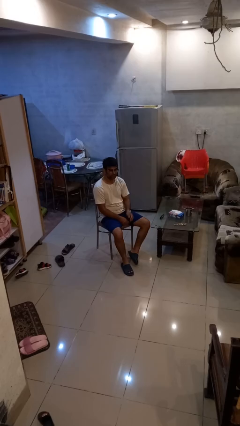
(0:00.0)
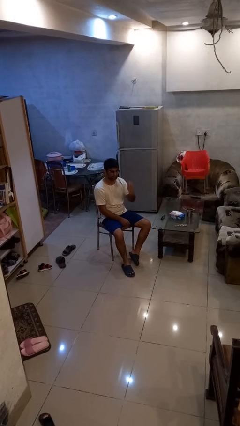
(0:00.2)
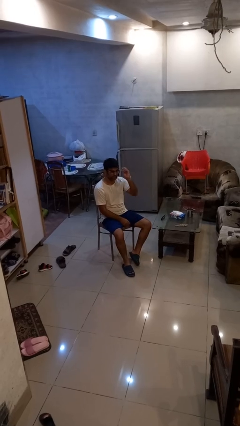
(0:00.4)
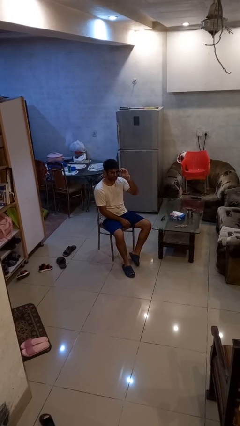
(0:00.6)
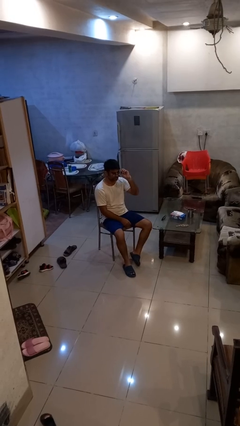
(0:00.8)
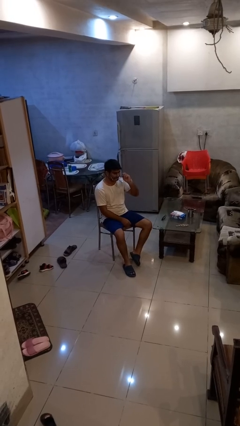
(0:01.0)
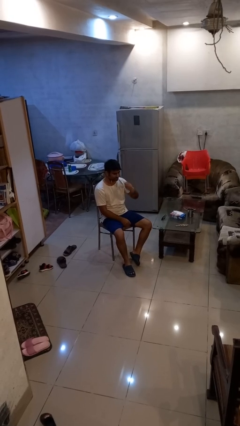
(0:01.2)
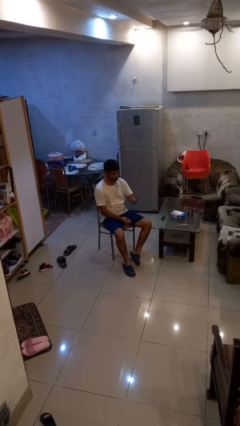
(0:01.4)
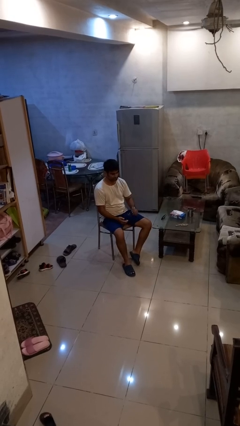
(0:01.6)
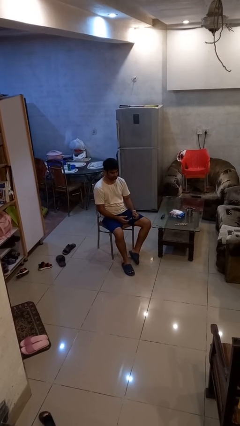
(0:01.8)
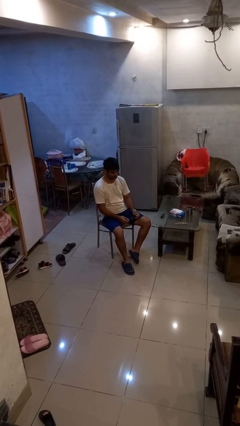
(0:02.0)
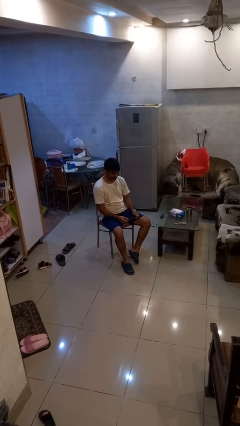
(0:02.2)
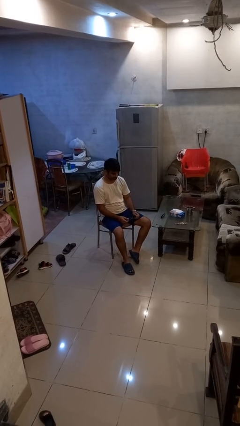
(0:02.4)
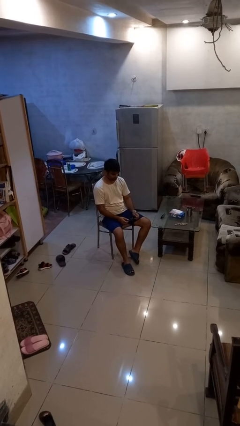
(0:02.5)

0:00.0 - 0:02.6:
person takes off glasses

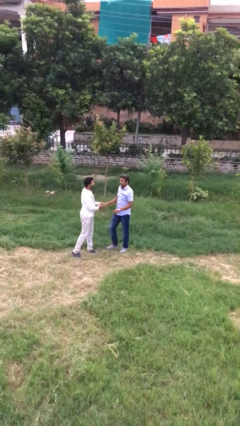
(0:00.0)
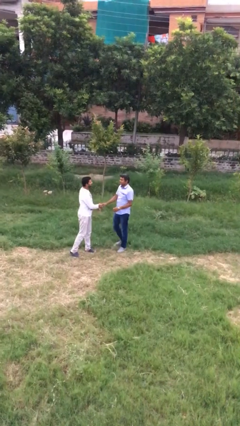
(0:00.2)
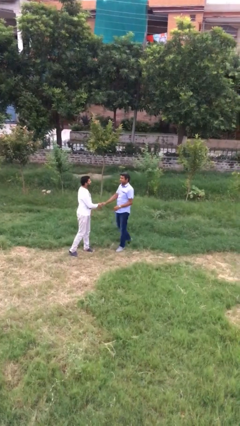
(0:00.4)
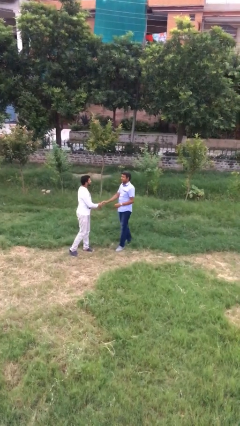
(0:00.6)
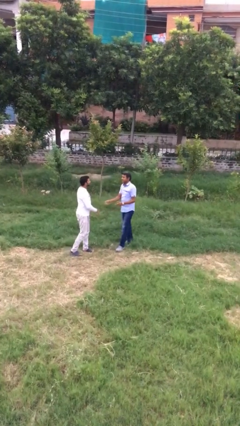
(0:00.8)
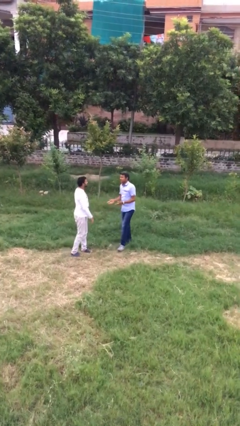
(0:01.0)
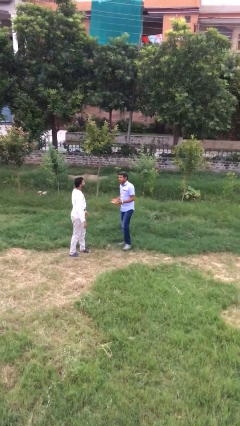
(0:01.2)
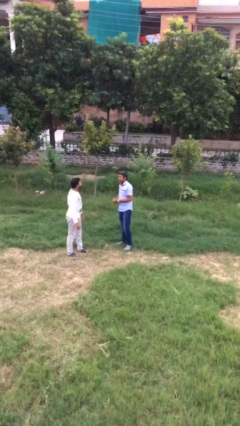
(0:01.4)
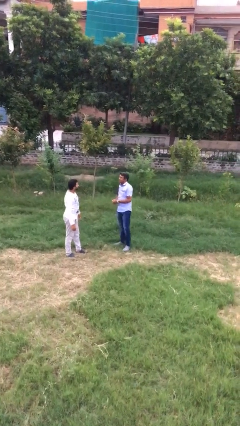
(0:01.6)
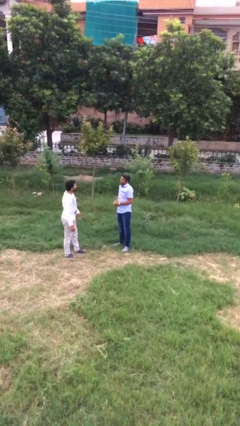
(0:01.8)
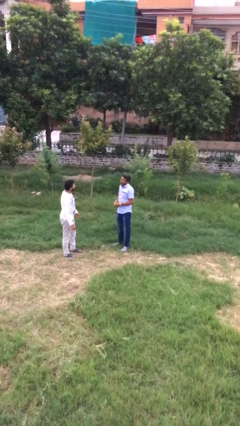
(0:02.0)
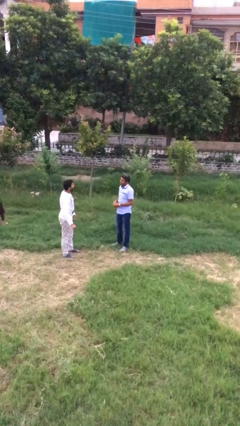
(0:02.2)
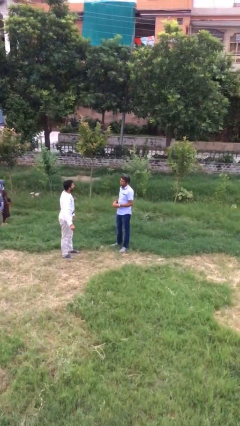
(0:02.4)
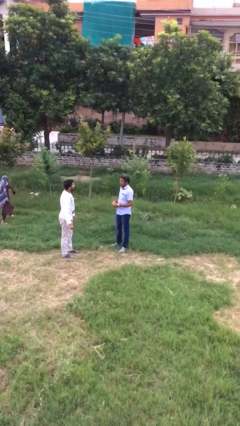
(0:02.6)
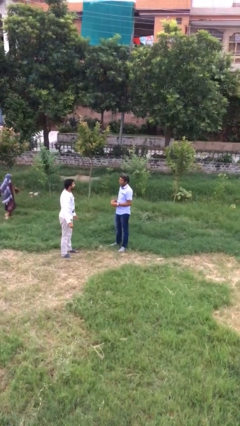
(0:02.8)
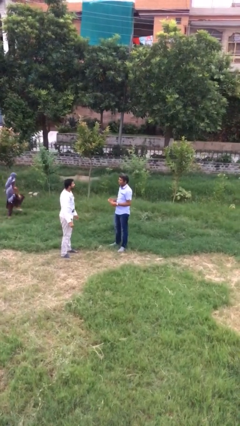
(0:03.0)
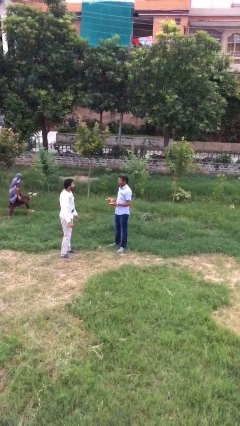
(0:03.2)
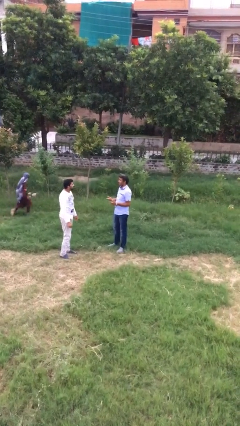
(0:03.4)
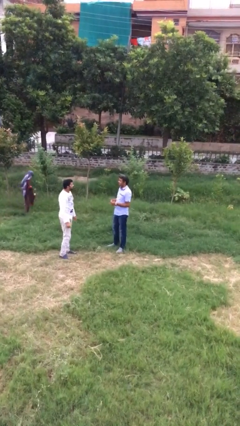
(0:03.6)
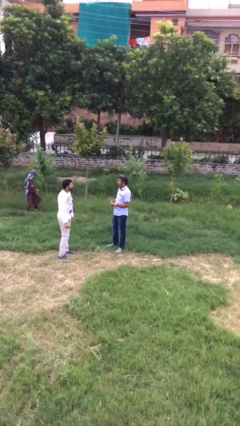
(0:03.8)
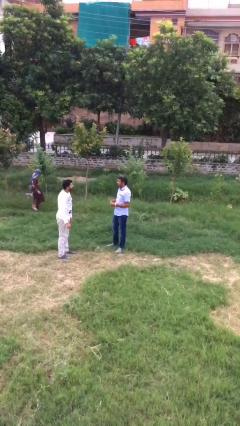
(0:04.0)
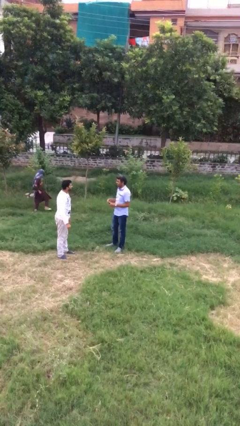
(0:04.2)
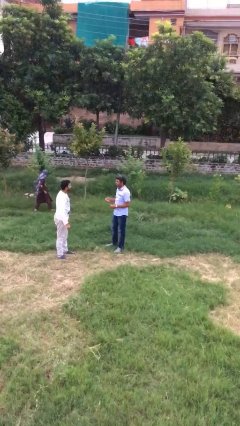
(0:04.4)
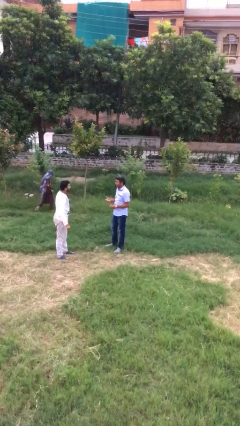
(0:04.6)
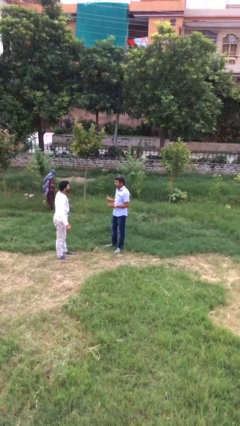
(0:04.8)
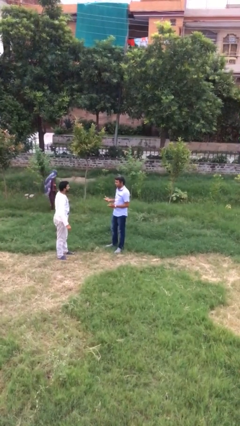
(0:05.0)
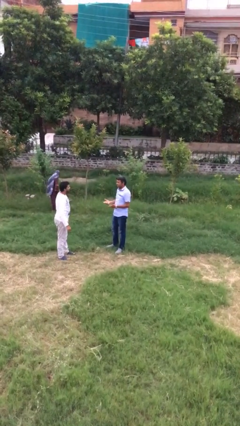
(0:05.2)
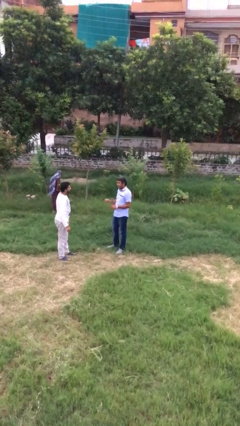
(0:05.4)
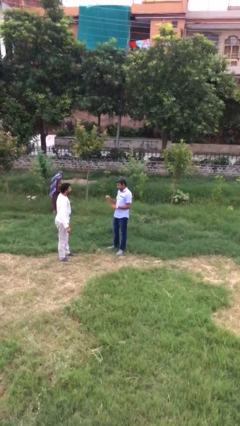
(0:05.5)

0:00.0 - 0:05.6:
person talks to person

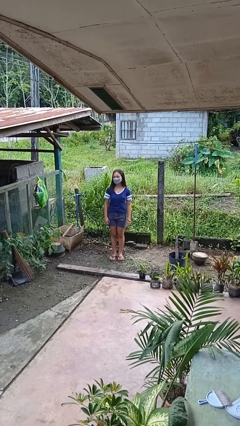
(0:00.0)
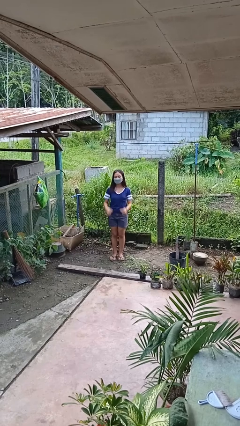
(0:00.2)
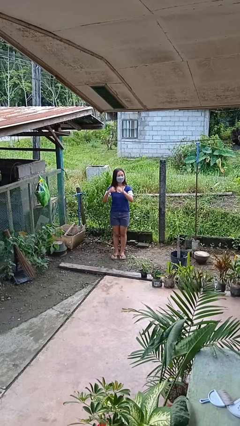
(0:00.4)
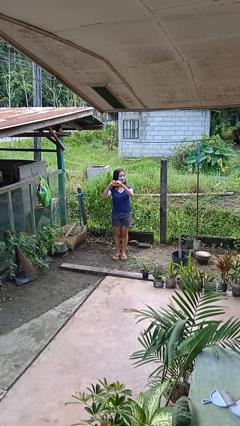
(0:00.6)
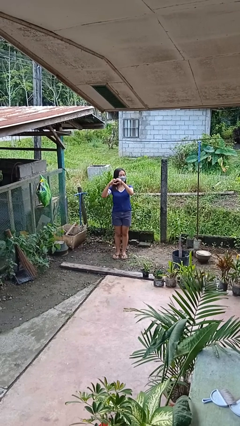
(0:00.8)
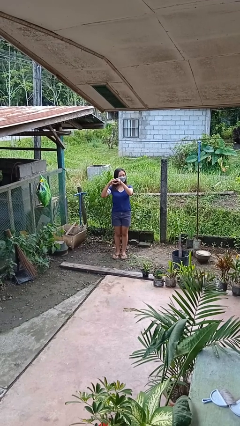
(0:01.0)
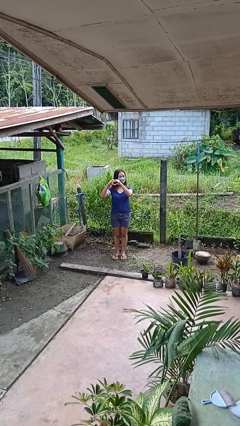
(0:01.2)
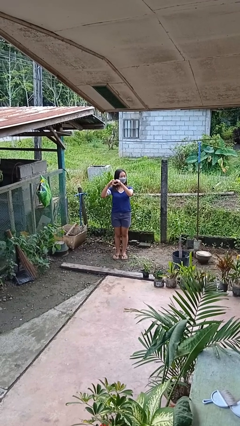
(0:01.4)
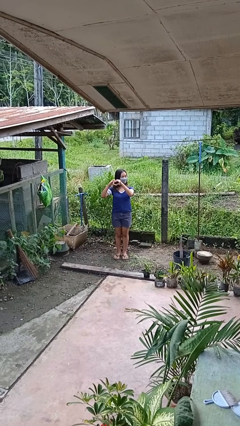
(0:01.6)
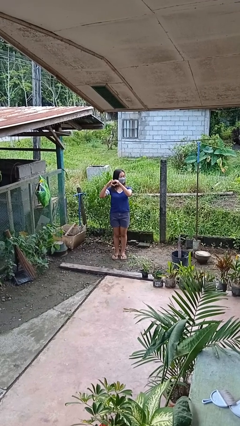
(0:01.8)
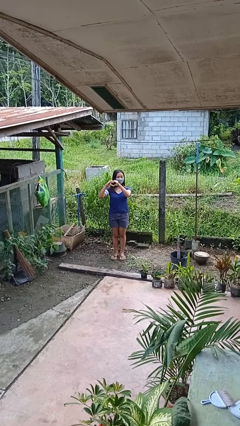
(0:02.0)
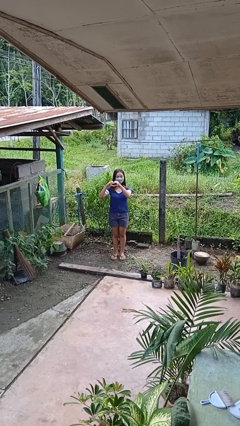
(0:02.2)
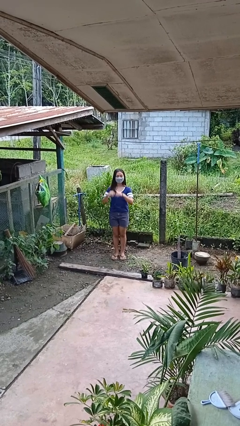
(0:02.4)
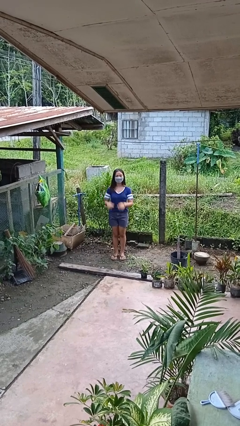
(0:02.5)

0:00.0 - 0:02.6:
person gestures heart

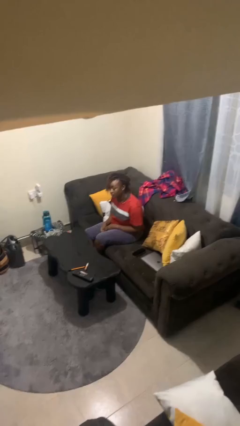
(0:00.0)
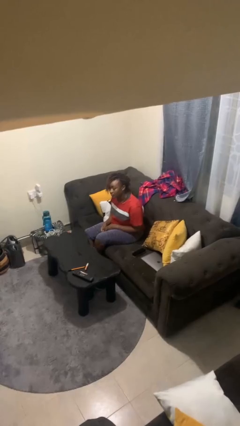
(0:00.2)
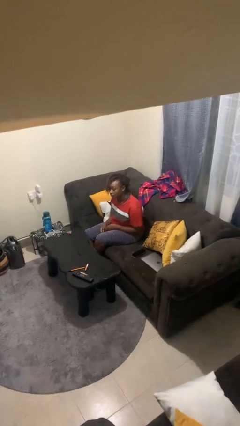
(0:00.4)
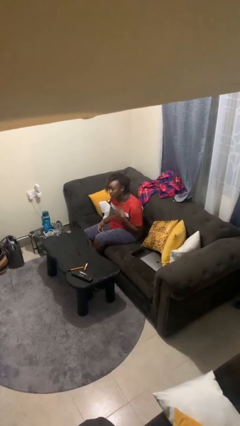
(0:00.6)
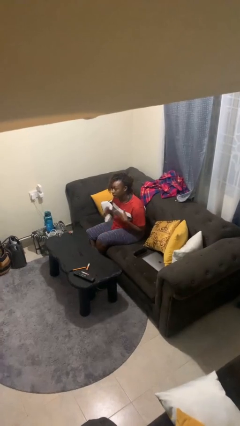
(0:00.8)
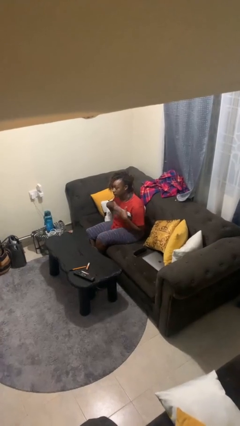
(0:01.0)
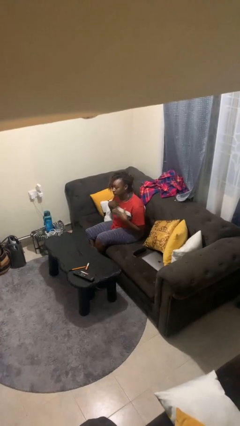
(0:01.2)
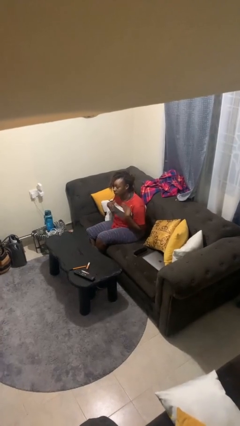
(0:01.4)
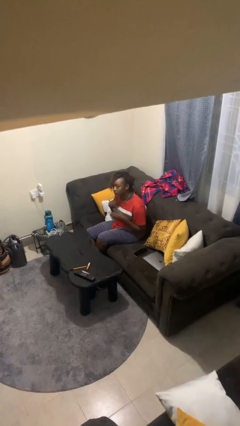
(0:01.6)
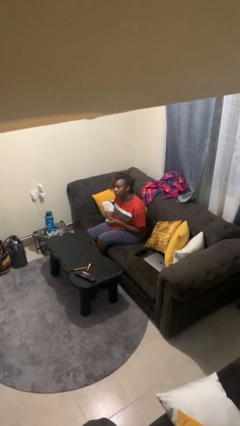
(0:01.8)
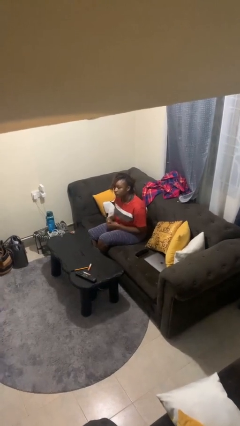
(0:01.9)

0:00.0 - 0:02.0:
person drums on chest

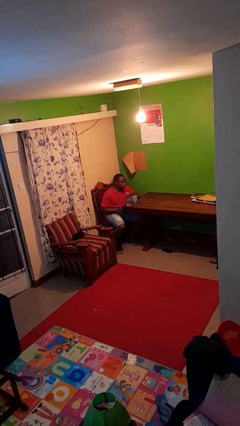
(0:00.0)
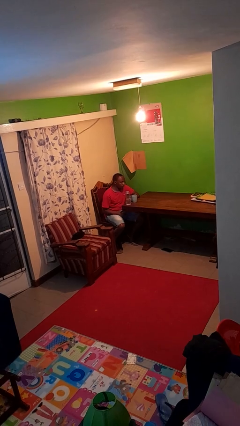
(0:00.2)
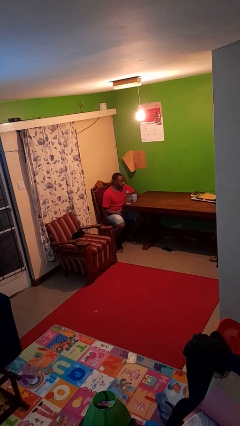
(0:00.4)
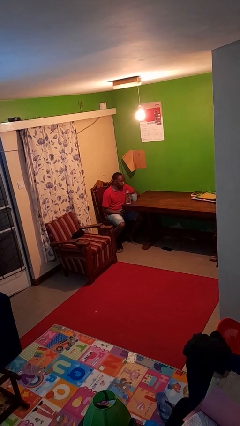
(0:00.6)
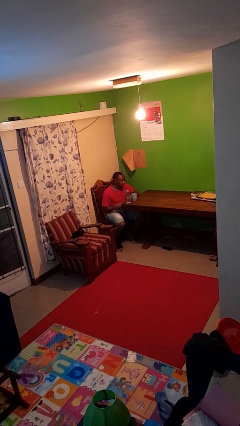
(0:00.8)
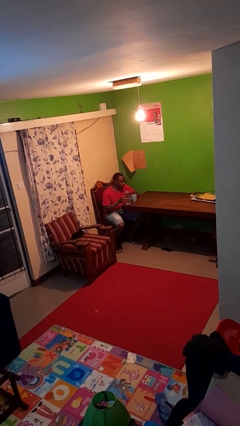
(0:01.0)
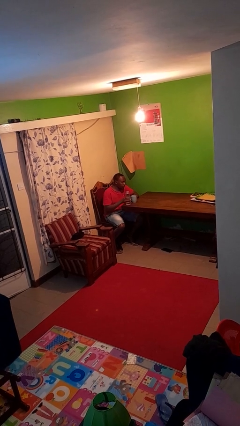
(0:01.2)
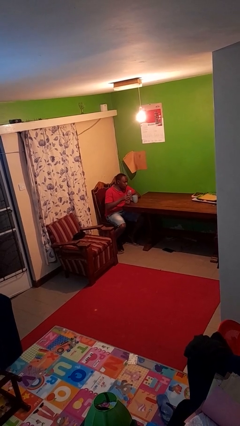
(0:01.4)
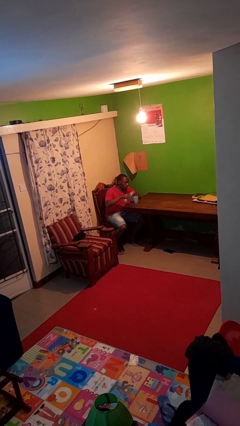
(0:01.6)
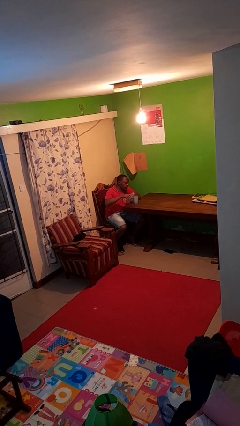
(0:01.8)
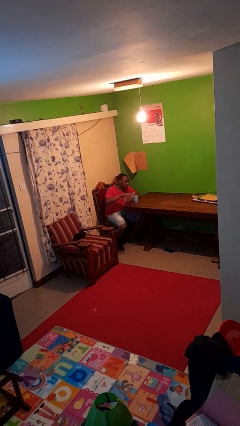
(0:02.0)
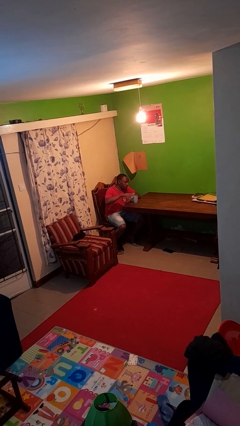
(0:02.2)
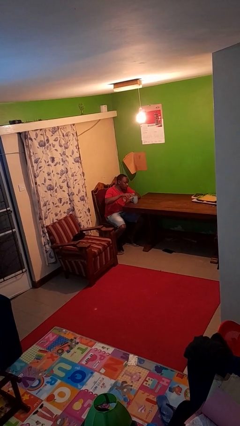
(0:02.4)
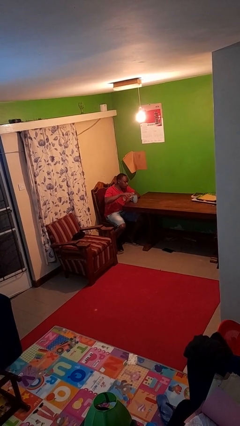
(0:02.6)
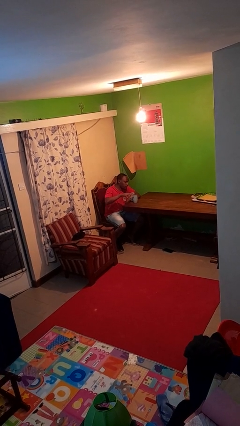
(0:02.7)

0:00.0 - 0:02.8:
person pours liquid into cup

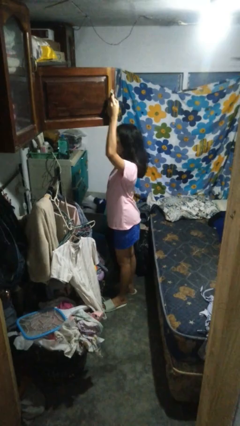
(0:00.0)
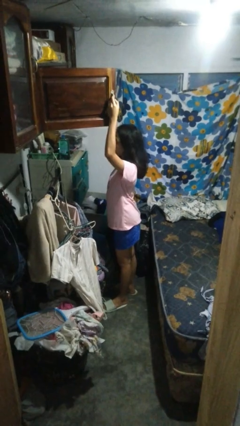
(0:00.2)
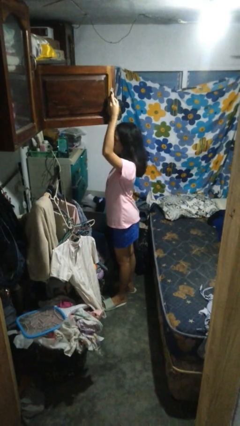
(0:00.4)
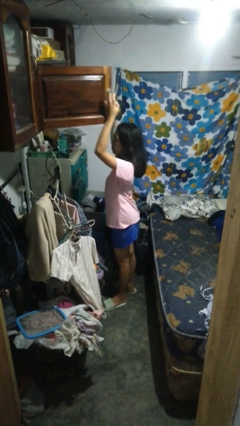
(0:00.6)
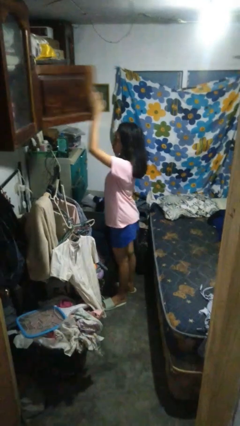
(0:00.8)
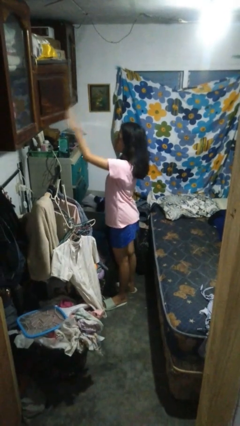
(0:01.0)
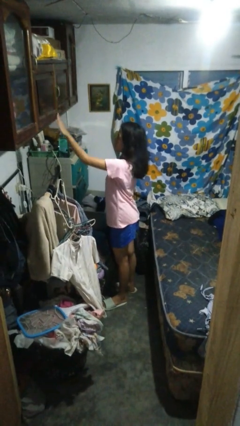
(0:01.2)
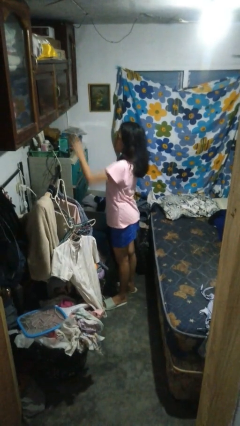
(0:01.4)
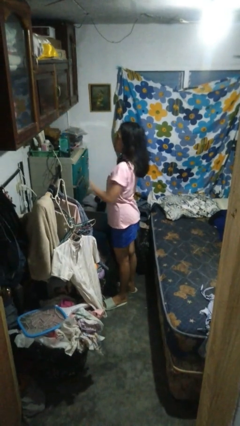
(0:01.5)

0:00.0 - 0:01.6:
person closes closet door

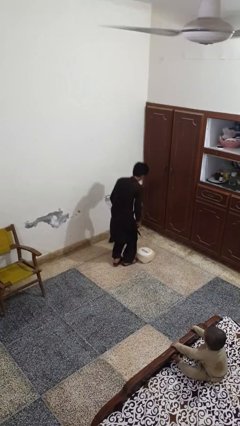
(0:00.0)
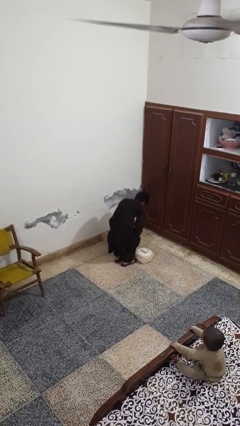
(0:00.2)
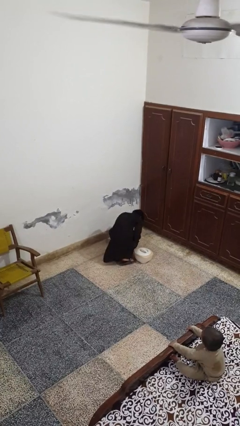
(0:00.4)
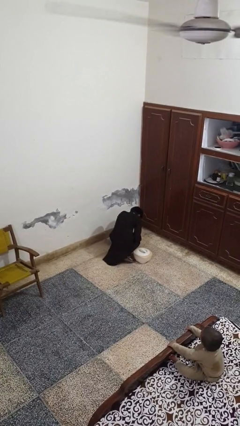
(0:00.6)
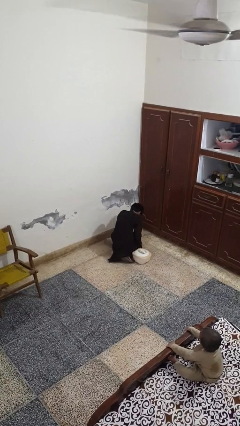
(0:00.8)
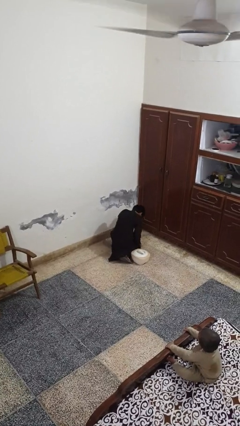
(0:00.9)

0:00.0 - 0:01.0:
person trips on object on floor
